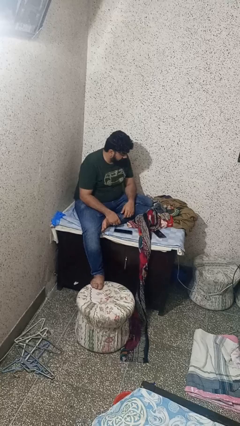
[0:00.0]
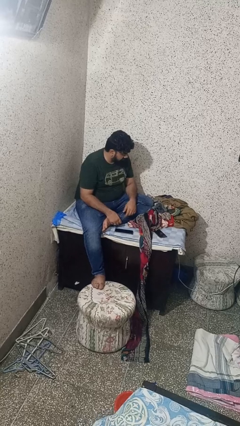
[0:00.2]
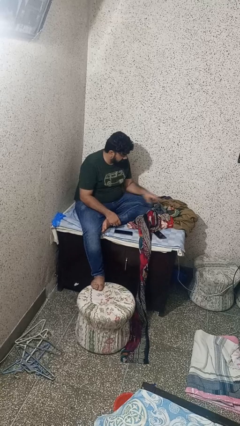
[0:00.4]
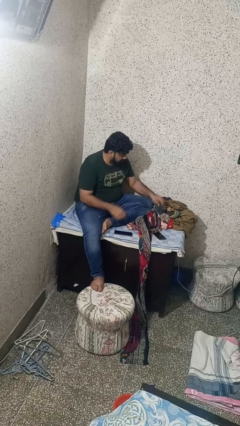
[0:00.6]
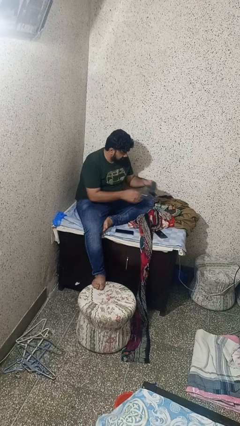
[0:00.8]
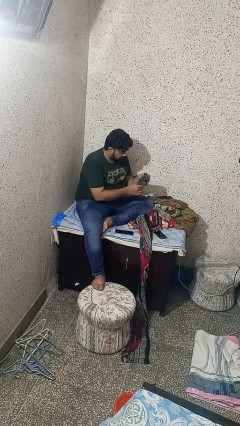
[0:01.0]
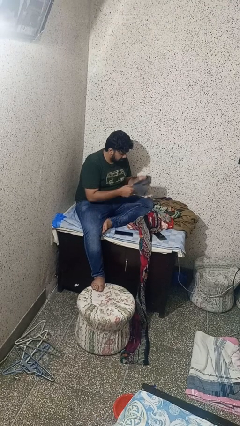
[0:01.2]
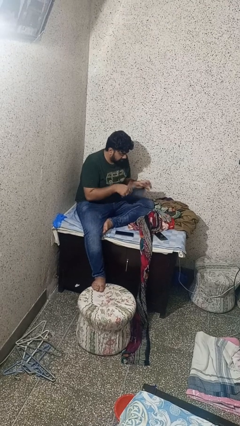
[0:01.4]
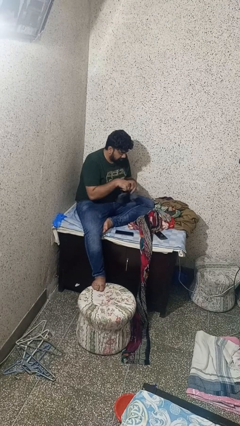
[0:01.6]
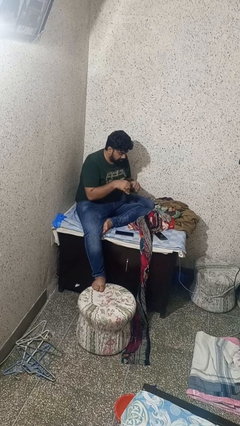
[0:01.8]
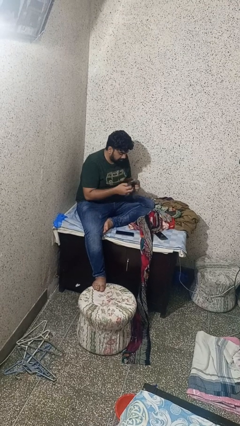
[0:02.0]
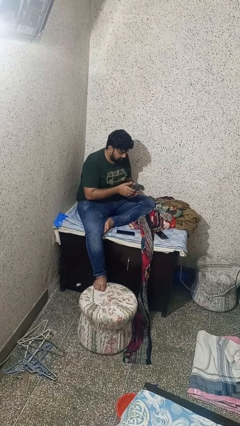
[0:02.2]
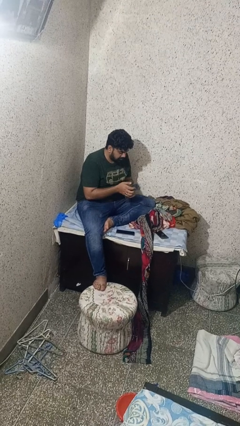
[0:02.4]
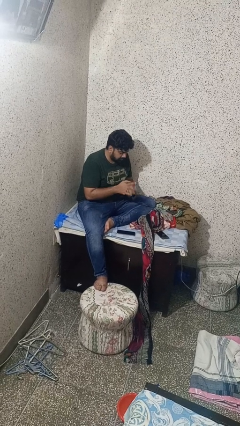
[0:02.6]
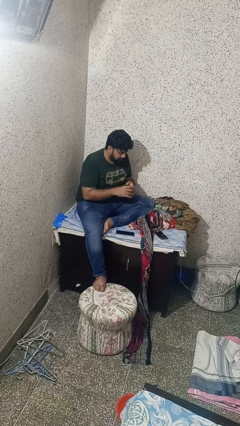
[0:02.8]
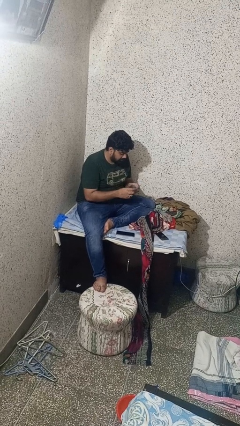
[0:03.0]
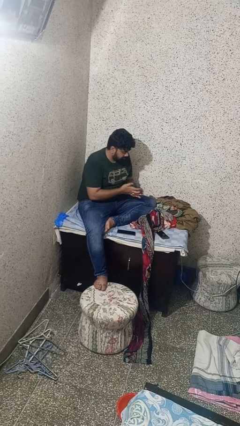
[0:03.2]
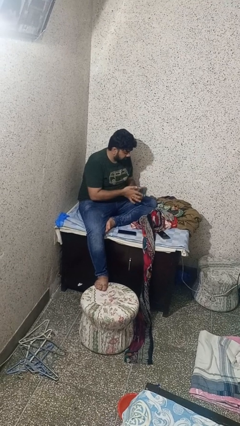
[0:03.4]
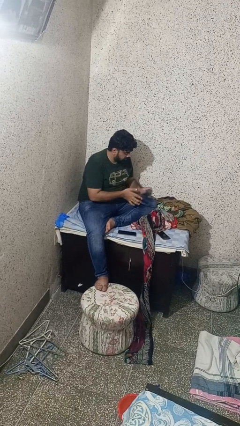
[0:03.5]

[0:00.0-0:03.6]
person folds socks

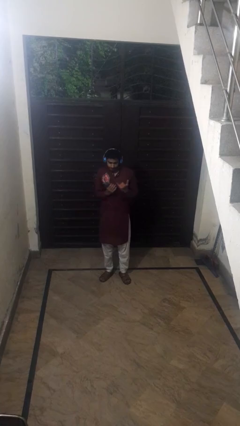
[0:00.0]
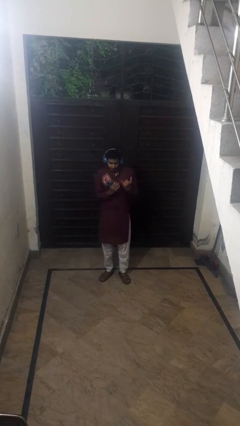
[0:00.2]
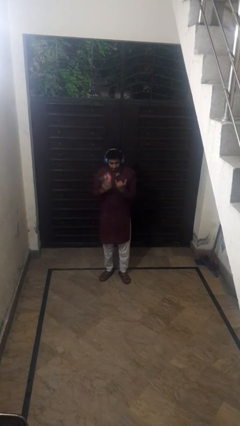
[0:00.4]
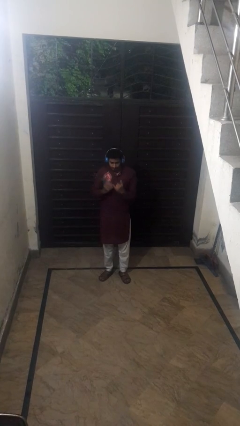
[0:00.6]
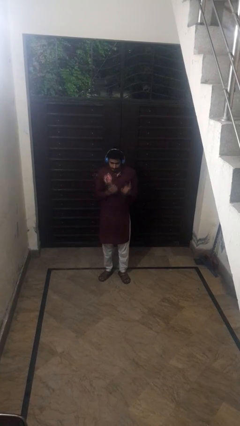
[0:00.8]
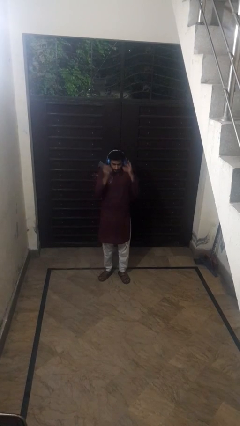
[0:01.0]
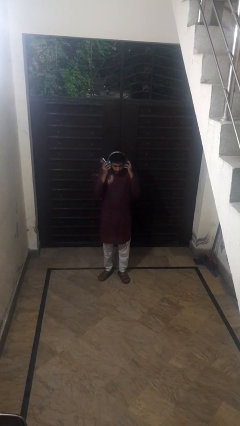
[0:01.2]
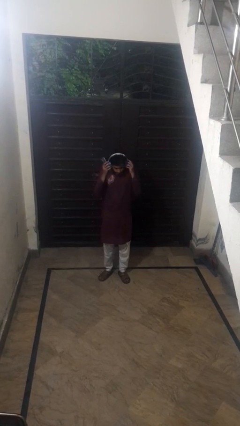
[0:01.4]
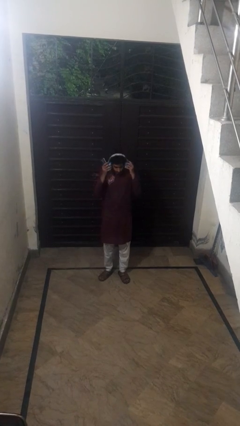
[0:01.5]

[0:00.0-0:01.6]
person takes off headphones

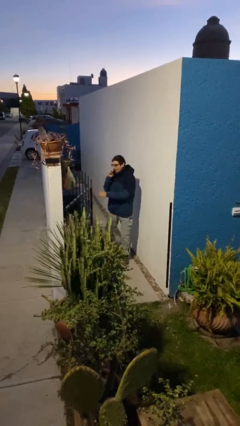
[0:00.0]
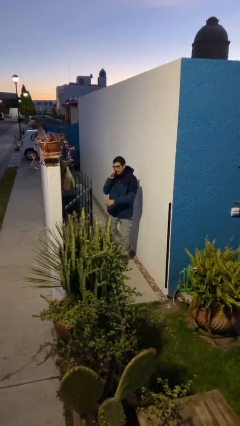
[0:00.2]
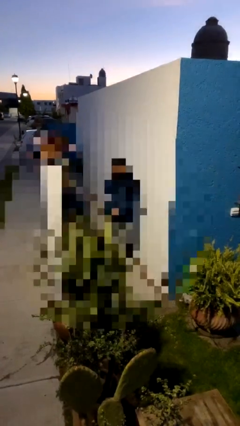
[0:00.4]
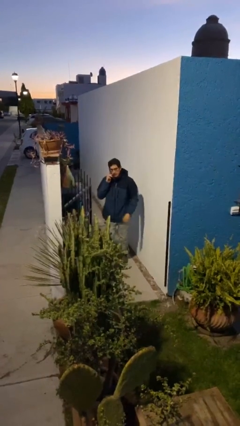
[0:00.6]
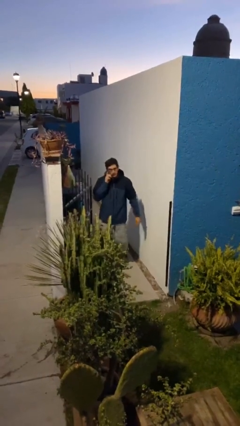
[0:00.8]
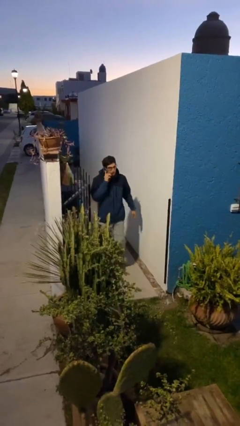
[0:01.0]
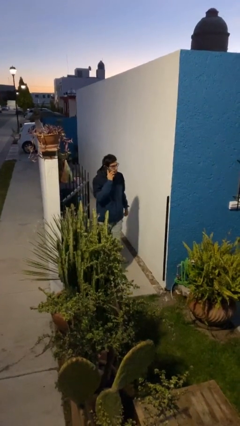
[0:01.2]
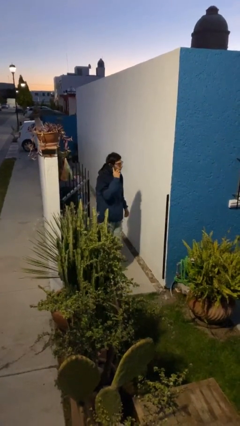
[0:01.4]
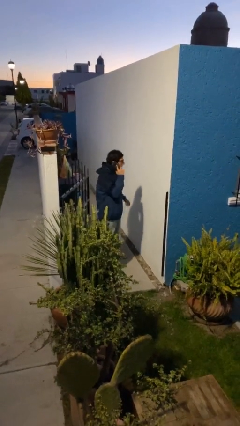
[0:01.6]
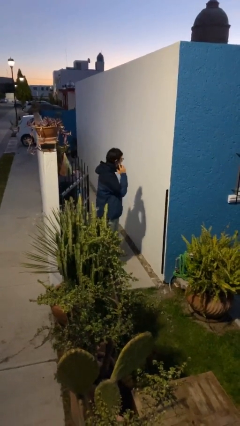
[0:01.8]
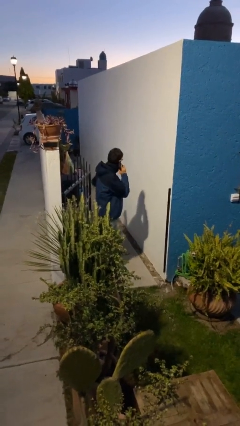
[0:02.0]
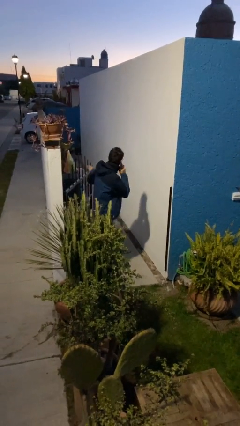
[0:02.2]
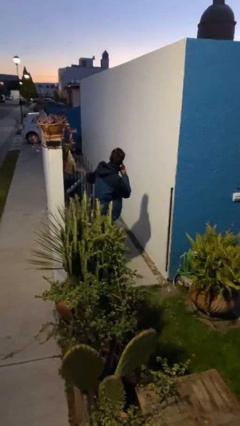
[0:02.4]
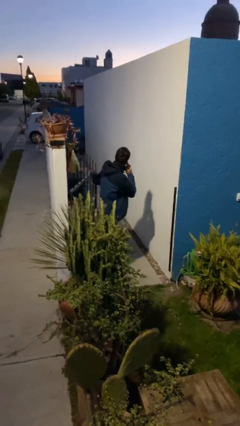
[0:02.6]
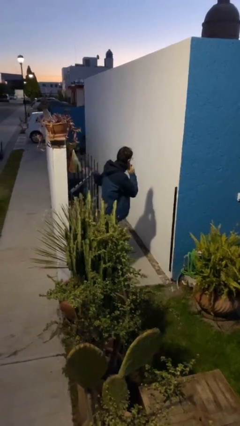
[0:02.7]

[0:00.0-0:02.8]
person enters scene through structure

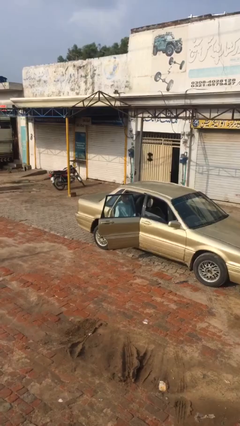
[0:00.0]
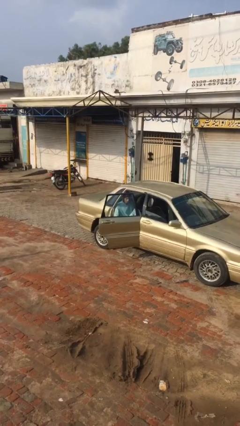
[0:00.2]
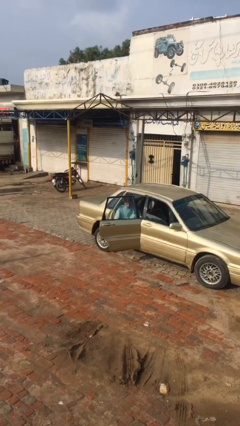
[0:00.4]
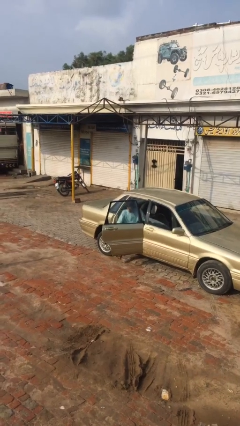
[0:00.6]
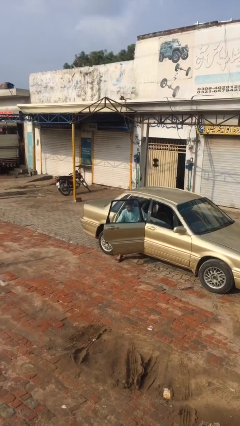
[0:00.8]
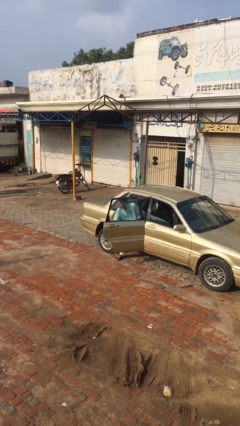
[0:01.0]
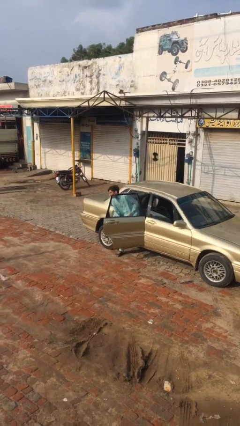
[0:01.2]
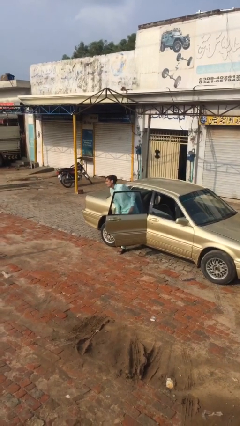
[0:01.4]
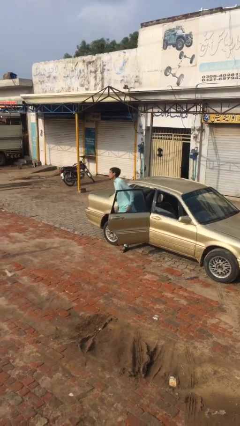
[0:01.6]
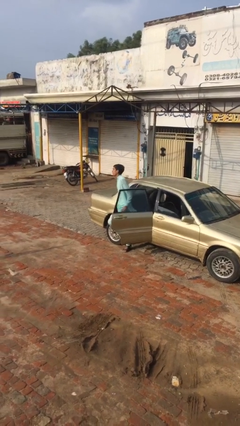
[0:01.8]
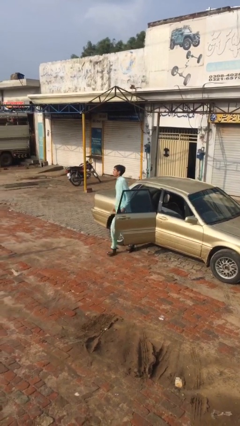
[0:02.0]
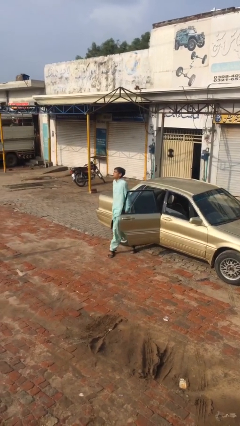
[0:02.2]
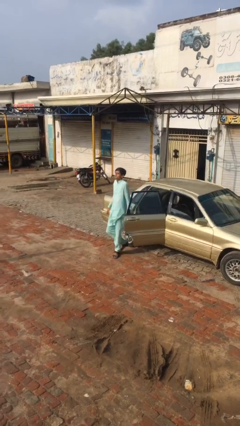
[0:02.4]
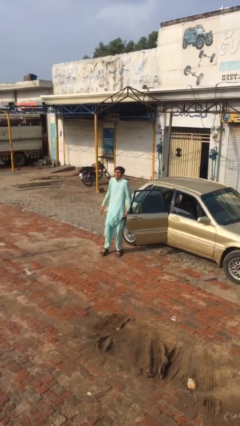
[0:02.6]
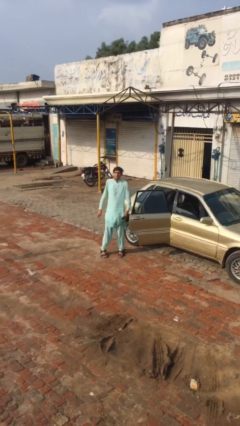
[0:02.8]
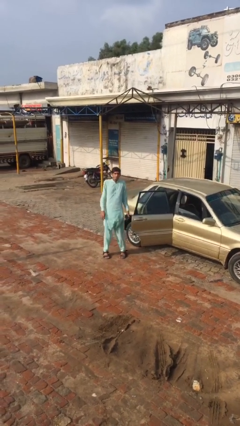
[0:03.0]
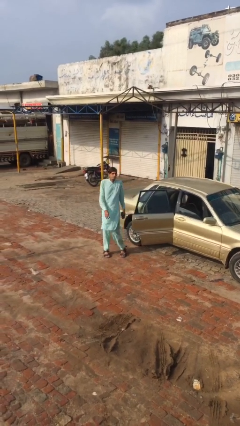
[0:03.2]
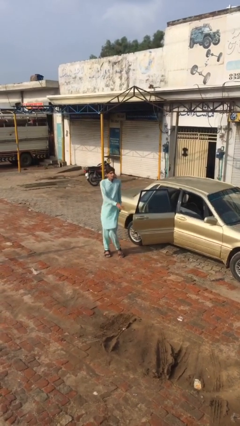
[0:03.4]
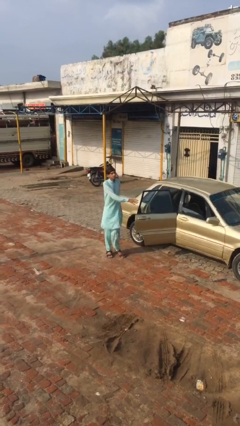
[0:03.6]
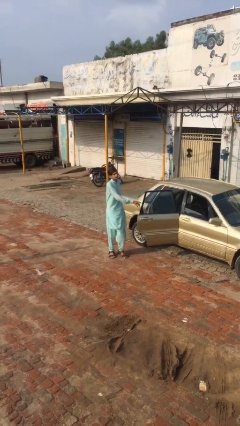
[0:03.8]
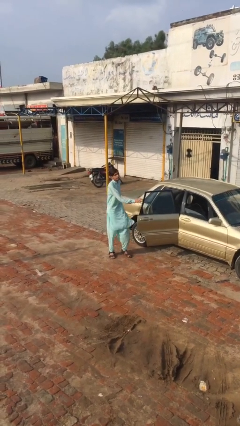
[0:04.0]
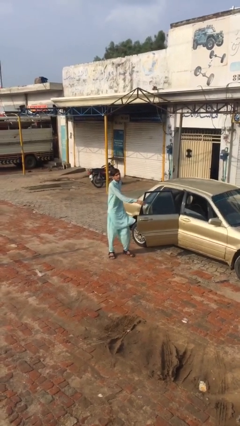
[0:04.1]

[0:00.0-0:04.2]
person exits car

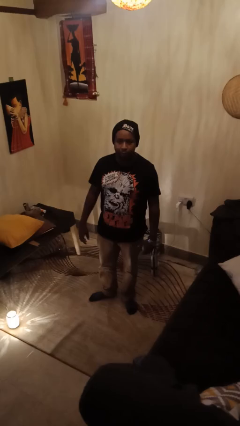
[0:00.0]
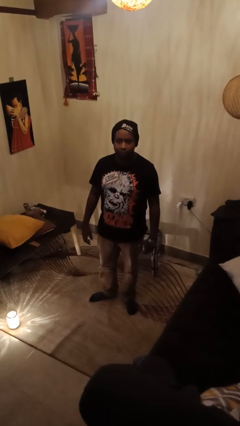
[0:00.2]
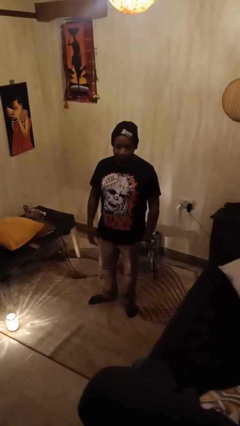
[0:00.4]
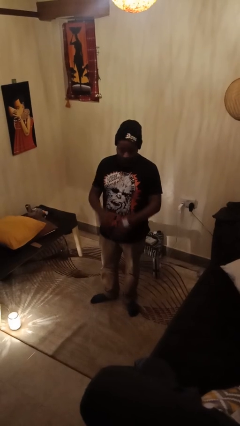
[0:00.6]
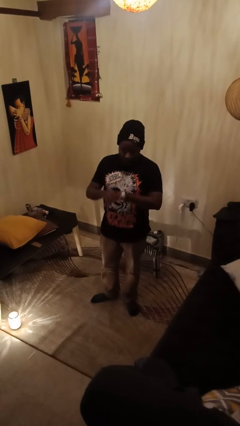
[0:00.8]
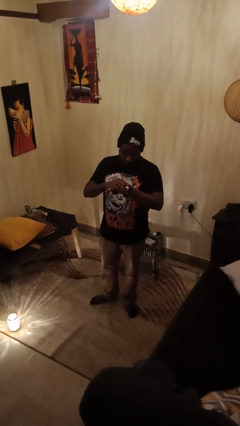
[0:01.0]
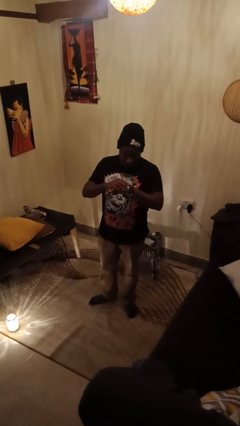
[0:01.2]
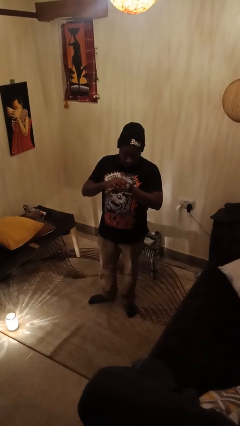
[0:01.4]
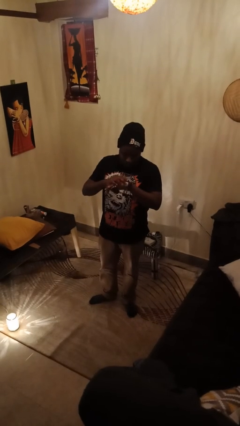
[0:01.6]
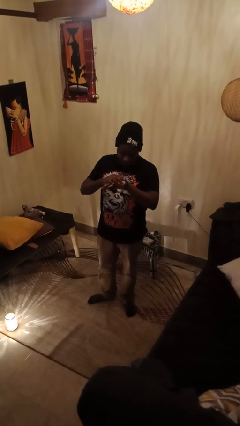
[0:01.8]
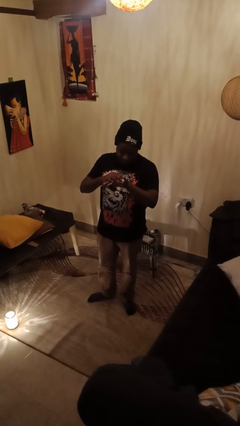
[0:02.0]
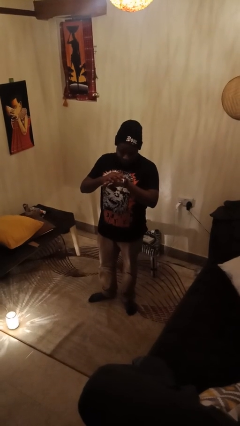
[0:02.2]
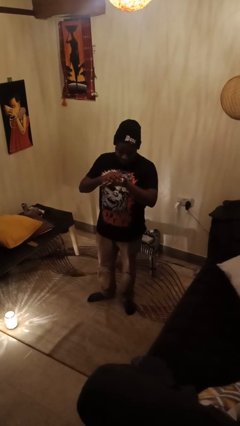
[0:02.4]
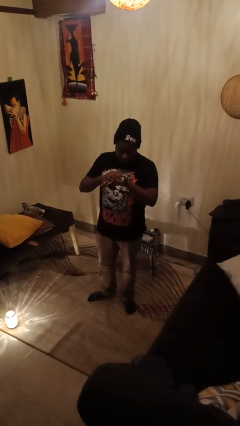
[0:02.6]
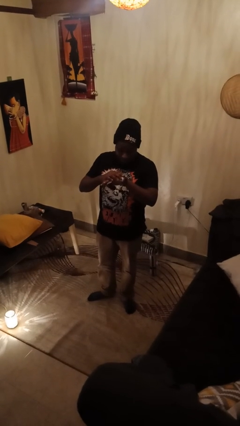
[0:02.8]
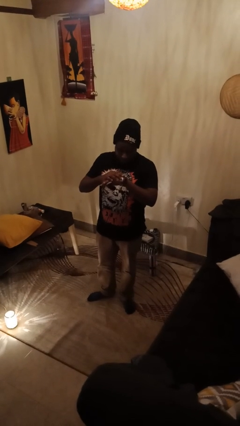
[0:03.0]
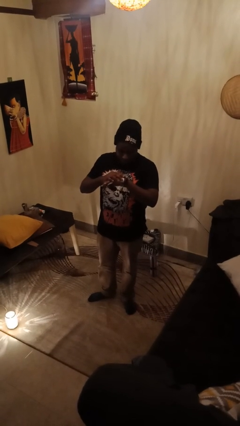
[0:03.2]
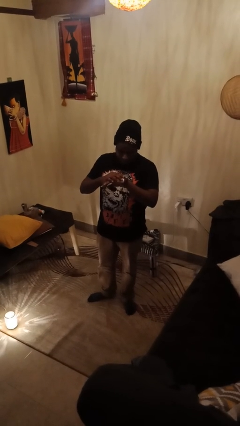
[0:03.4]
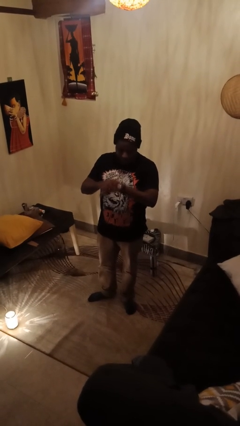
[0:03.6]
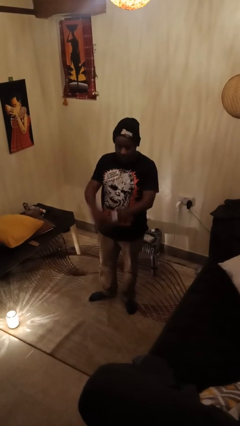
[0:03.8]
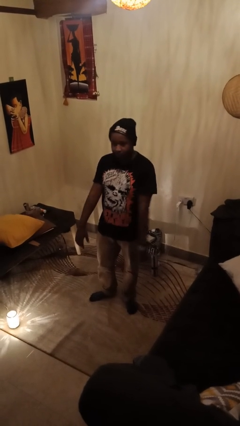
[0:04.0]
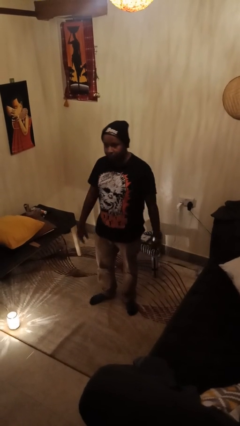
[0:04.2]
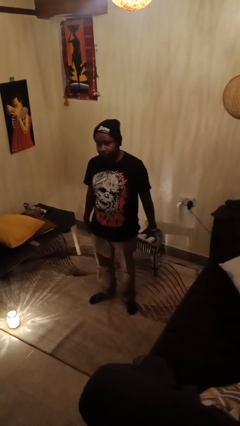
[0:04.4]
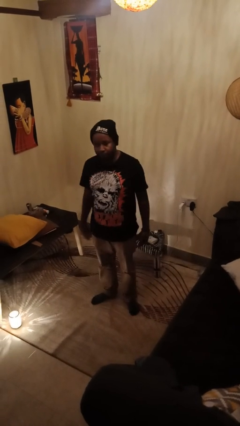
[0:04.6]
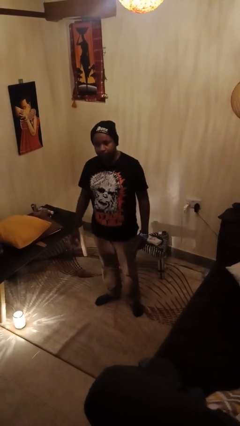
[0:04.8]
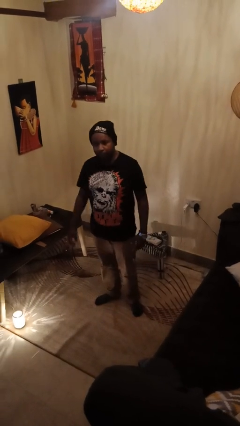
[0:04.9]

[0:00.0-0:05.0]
person looks at wristwatch
